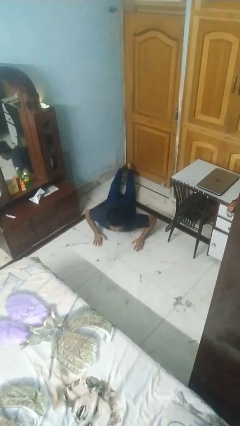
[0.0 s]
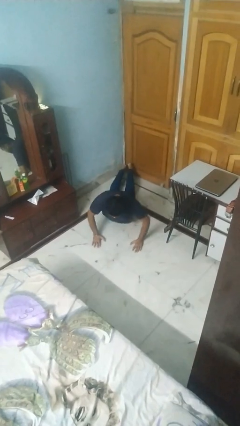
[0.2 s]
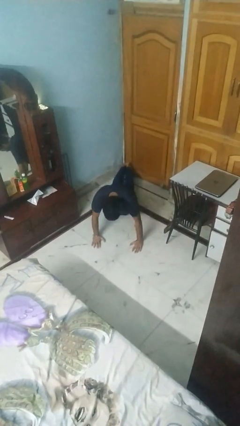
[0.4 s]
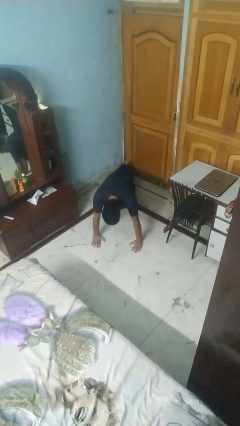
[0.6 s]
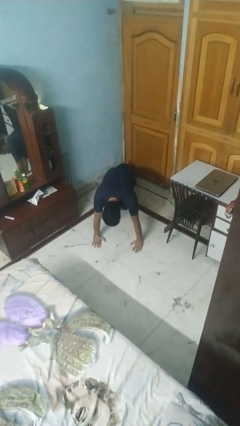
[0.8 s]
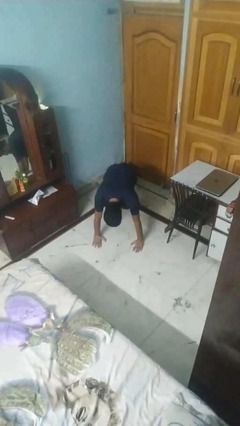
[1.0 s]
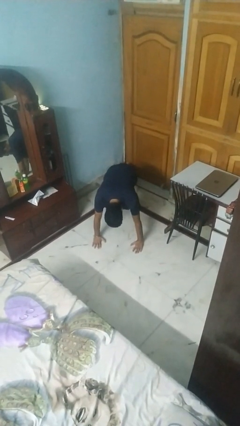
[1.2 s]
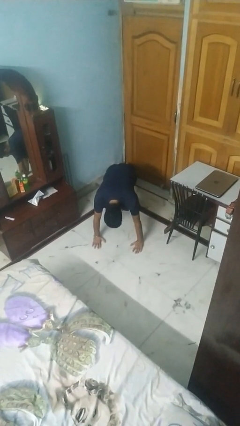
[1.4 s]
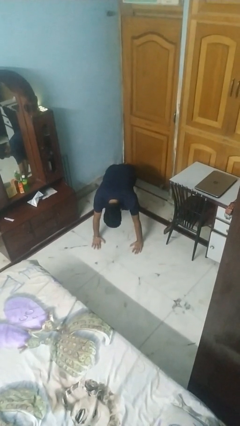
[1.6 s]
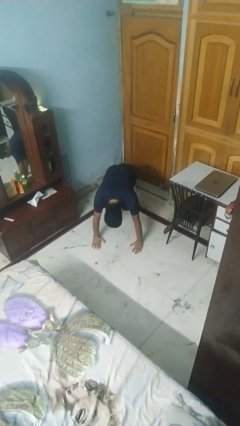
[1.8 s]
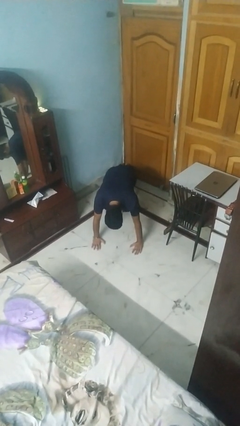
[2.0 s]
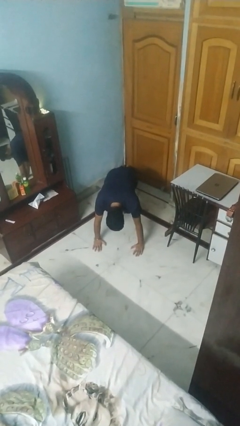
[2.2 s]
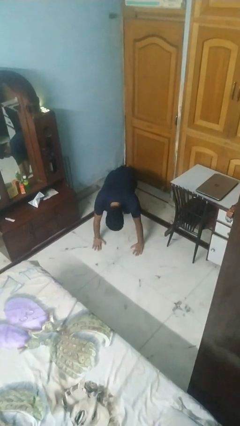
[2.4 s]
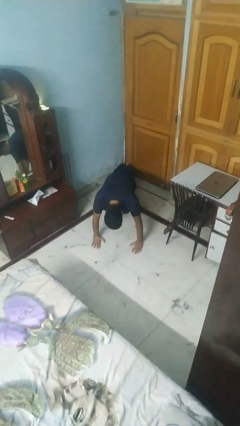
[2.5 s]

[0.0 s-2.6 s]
person exercises with pushup

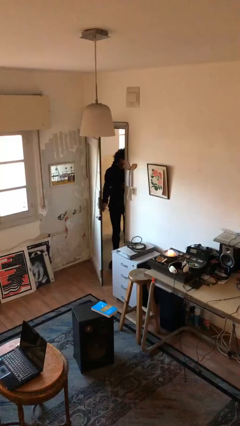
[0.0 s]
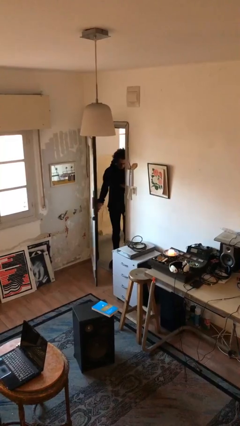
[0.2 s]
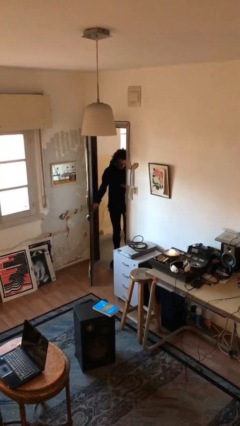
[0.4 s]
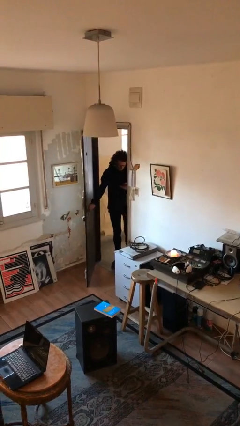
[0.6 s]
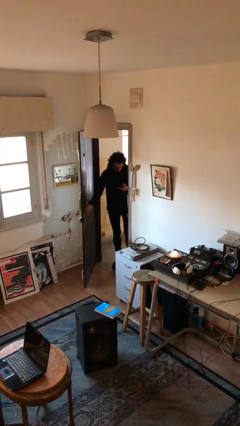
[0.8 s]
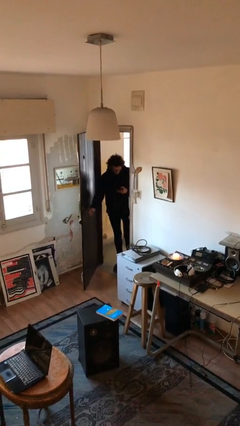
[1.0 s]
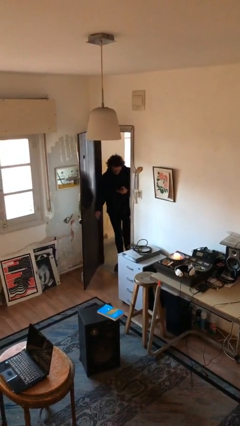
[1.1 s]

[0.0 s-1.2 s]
person opens facility door

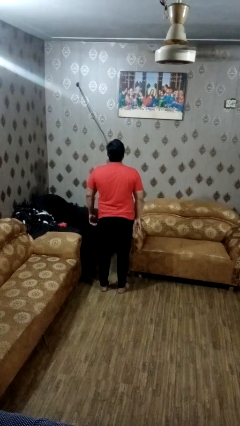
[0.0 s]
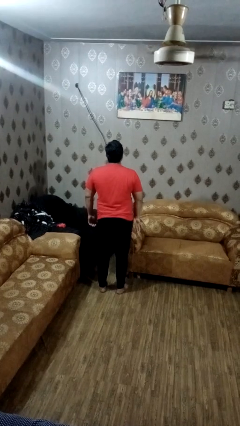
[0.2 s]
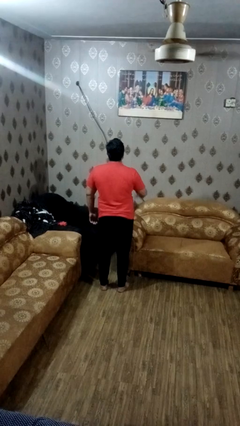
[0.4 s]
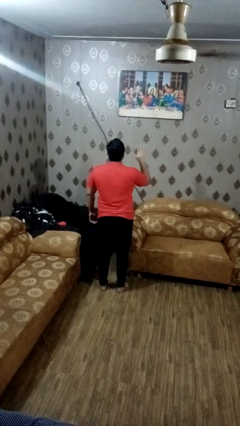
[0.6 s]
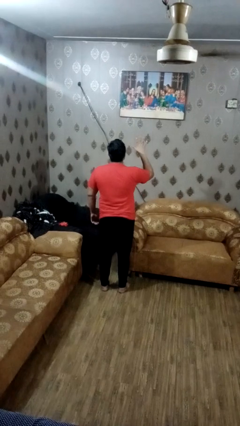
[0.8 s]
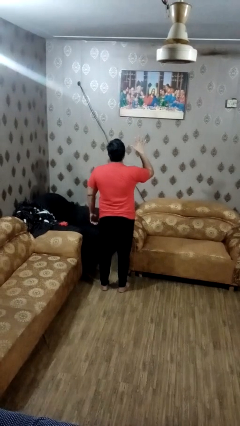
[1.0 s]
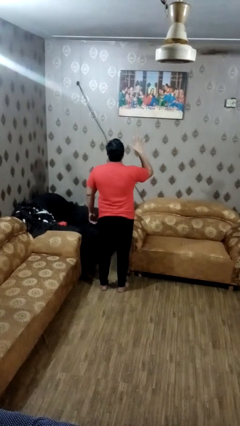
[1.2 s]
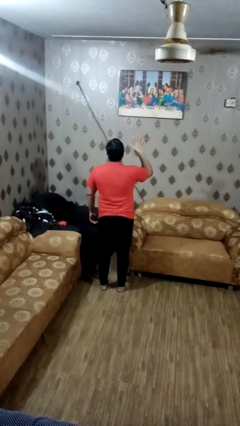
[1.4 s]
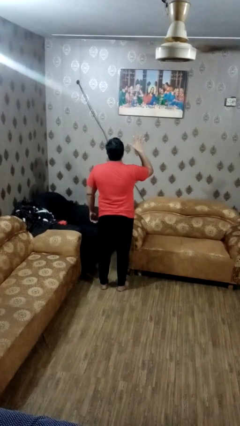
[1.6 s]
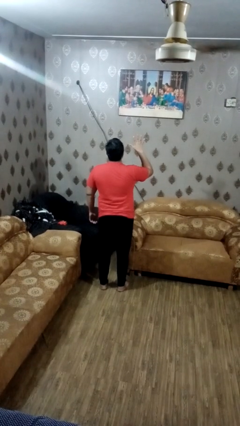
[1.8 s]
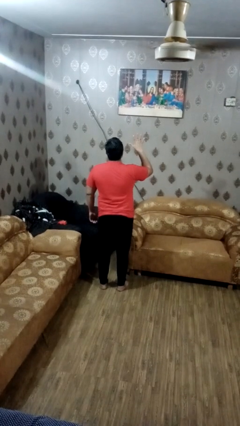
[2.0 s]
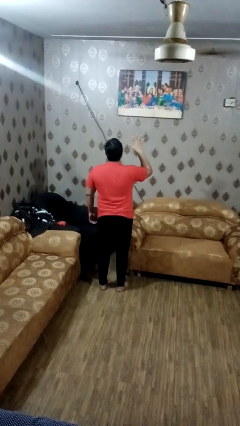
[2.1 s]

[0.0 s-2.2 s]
person gestures number five

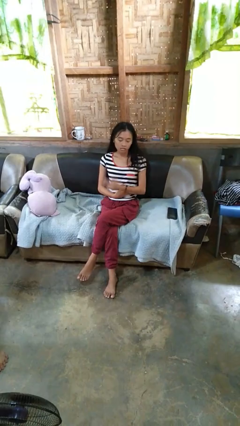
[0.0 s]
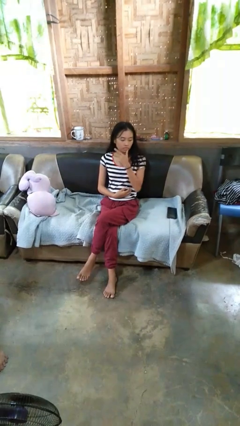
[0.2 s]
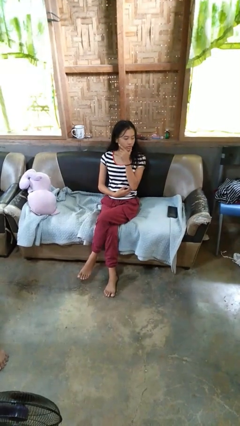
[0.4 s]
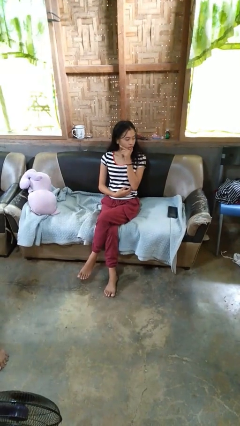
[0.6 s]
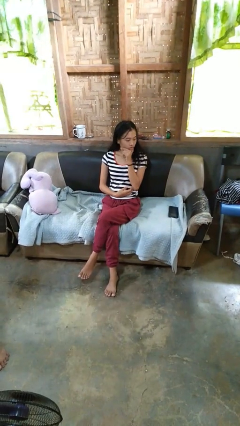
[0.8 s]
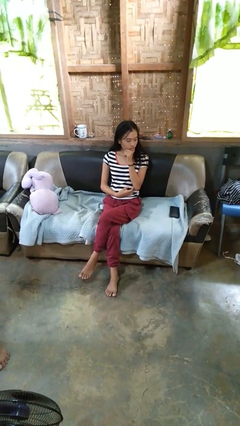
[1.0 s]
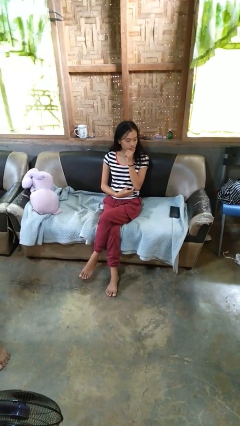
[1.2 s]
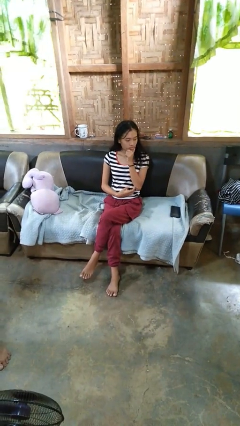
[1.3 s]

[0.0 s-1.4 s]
person strokes chin

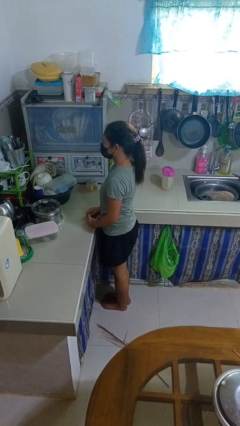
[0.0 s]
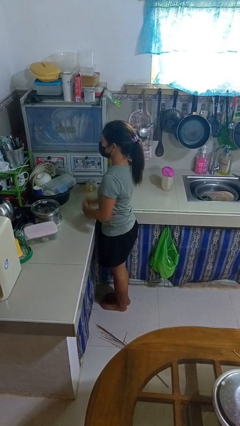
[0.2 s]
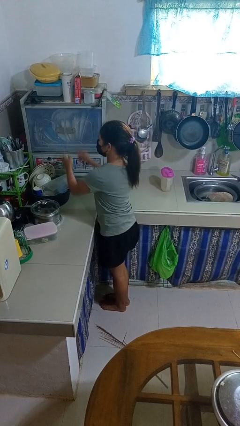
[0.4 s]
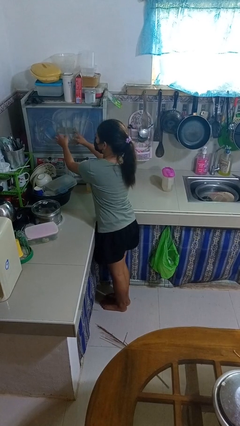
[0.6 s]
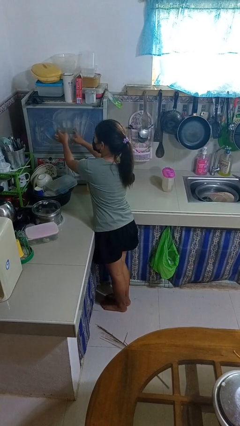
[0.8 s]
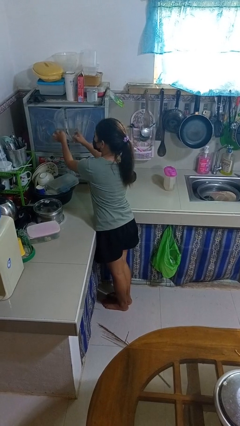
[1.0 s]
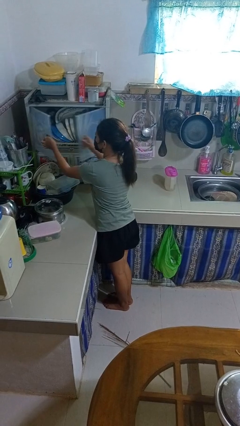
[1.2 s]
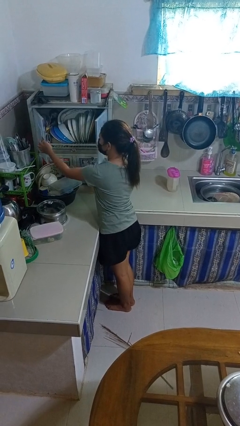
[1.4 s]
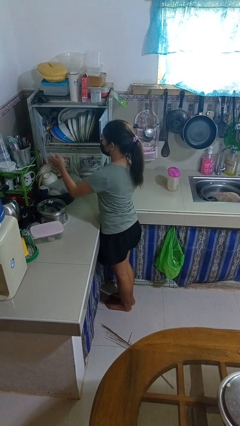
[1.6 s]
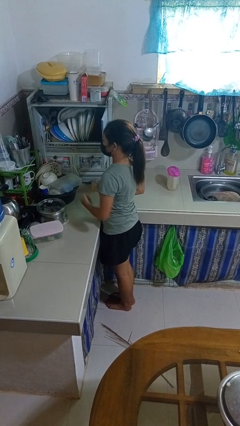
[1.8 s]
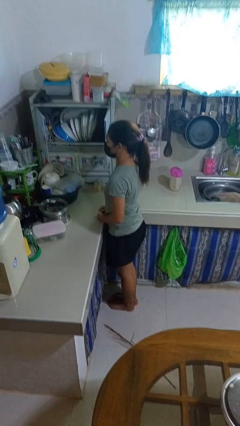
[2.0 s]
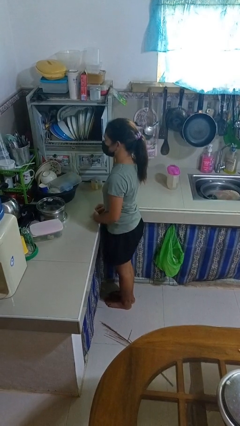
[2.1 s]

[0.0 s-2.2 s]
person opens kitchen drawer

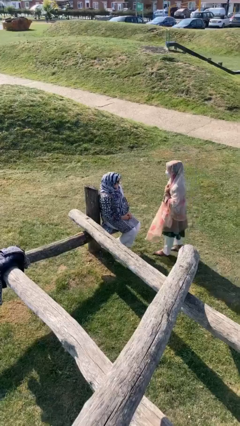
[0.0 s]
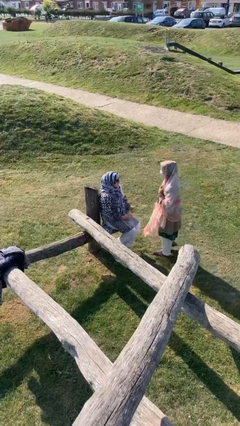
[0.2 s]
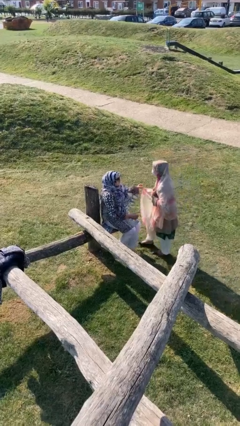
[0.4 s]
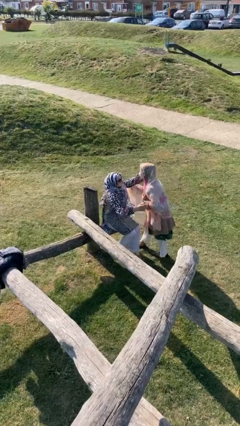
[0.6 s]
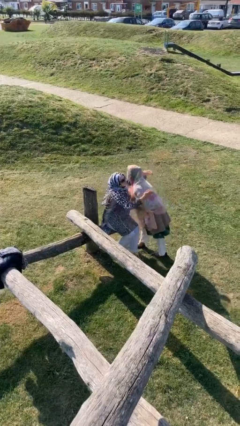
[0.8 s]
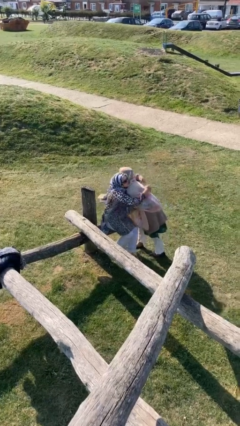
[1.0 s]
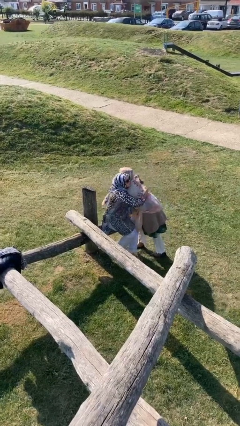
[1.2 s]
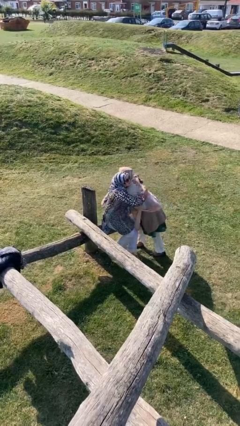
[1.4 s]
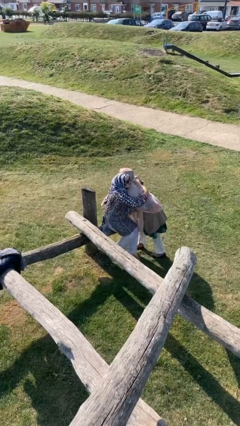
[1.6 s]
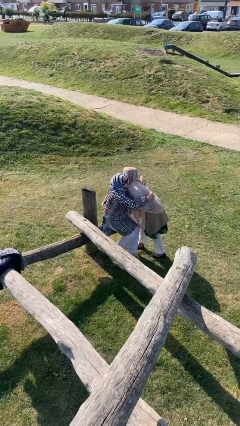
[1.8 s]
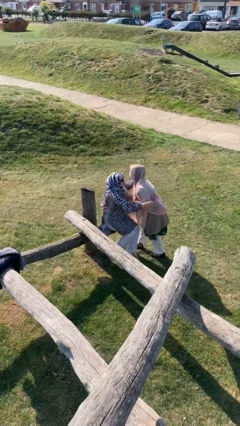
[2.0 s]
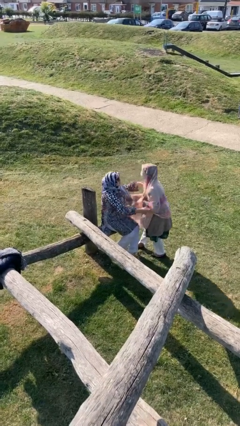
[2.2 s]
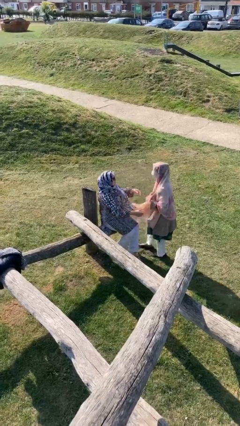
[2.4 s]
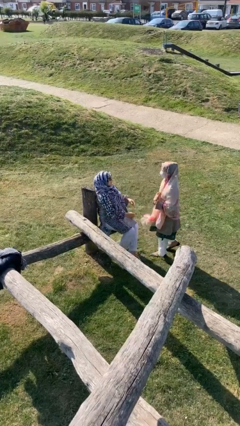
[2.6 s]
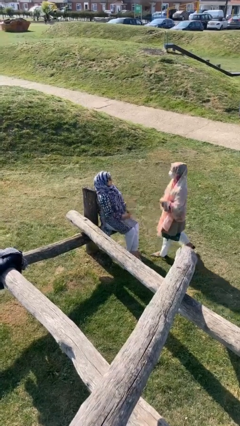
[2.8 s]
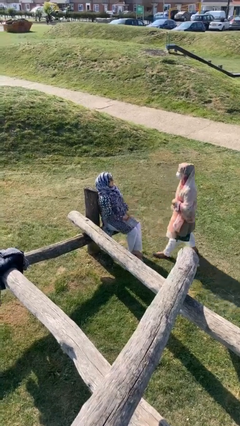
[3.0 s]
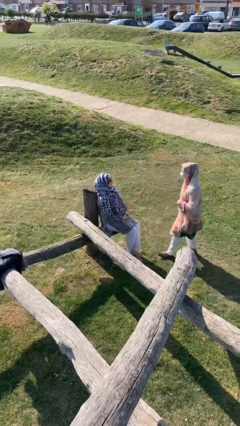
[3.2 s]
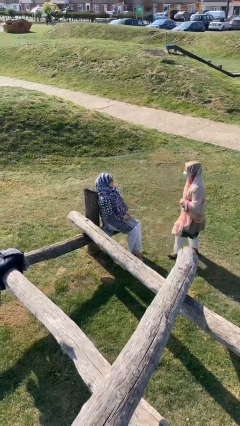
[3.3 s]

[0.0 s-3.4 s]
person embraces person

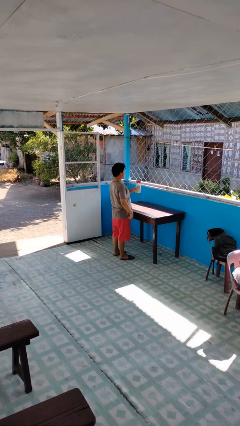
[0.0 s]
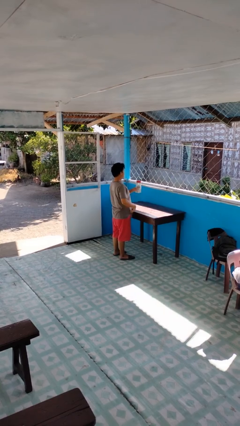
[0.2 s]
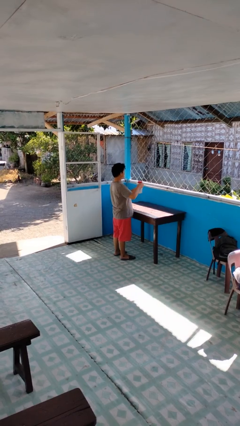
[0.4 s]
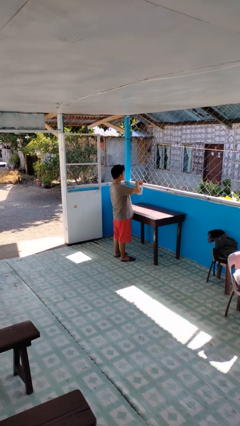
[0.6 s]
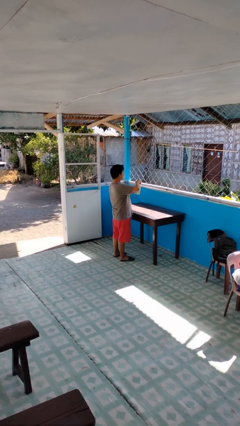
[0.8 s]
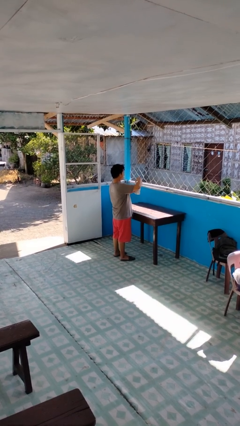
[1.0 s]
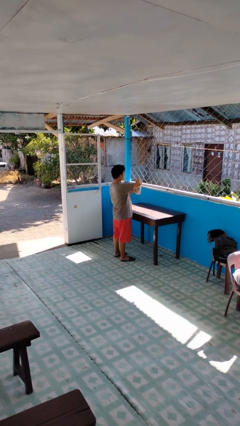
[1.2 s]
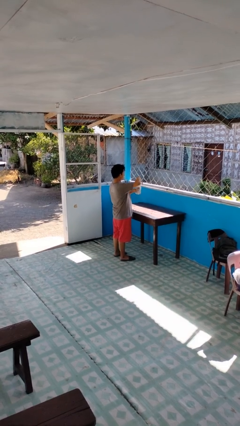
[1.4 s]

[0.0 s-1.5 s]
person opens jar

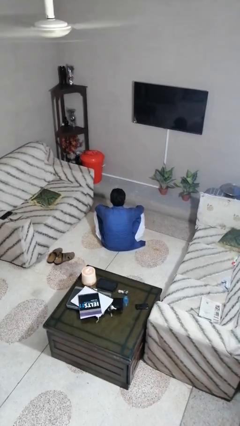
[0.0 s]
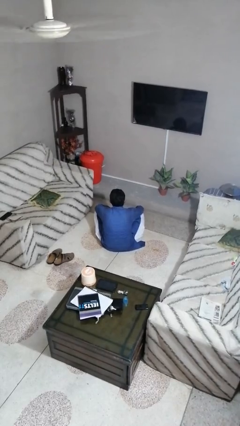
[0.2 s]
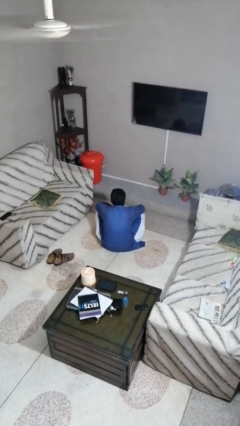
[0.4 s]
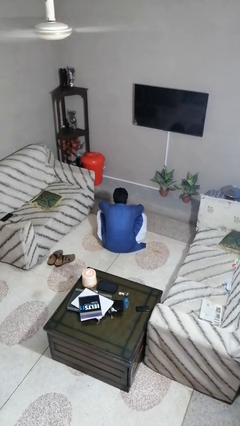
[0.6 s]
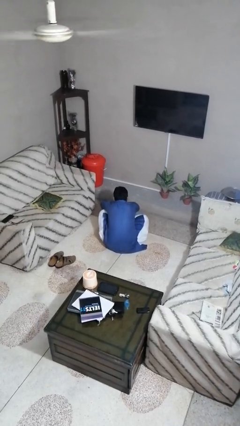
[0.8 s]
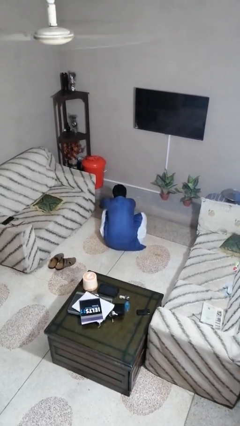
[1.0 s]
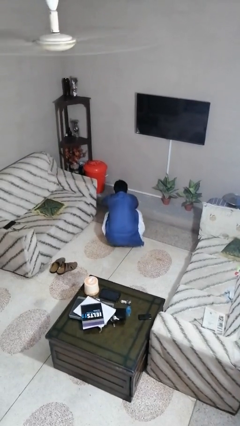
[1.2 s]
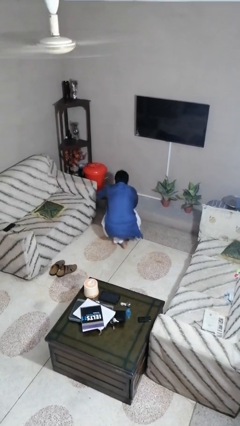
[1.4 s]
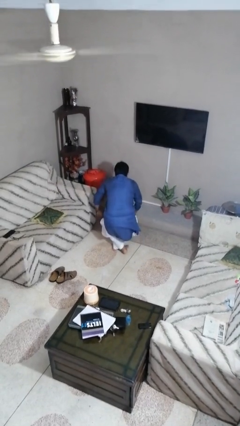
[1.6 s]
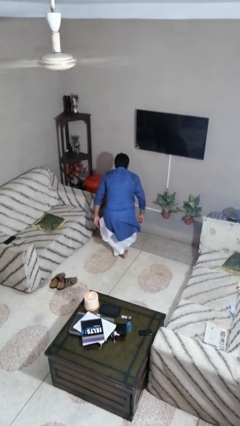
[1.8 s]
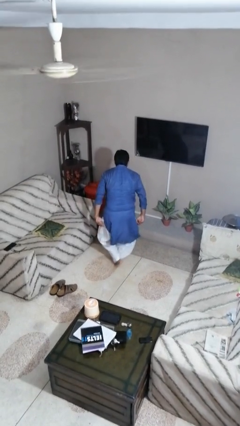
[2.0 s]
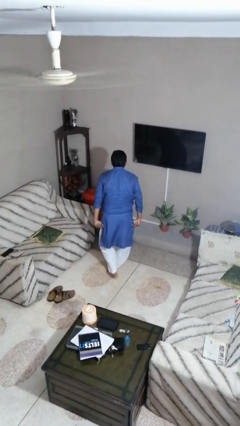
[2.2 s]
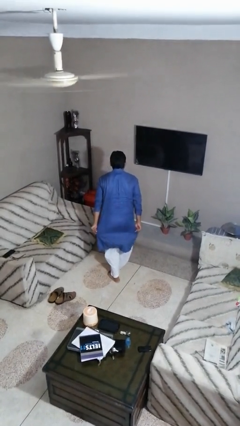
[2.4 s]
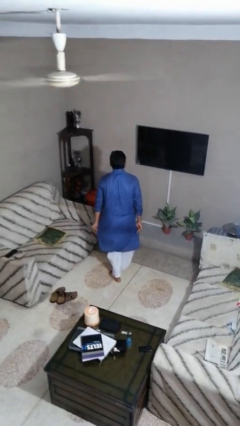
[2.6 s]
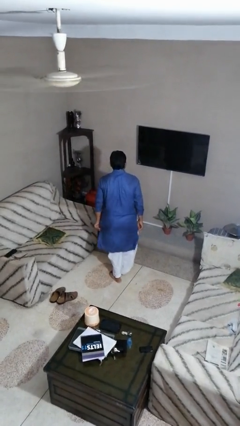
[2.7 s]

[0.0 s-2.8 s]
person stands up from floor
